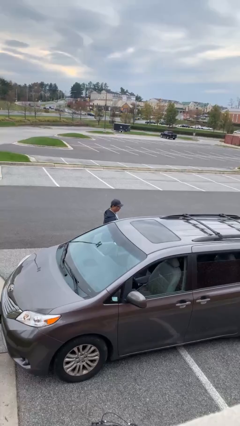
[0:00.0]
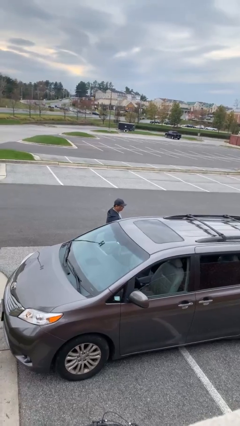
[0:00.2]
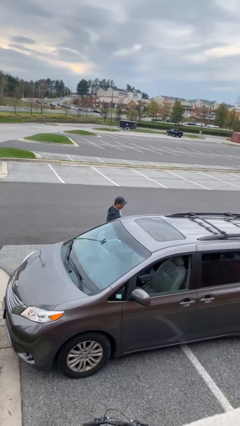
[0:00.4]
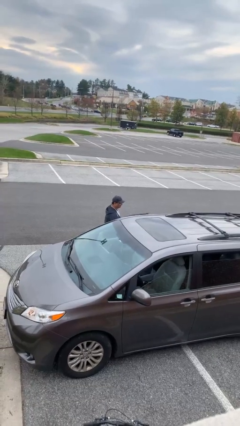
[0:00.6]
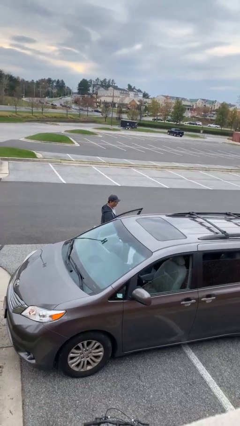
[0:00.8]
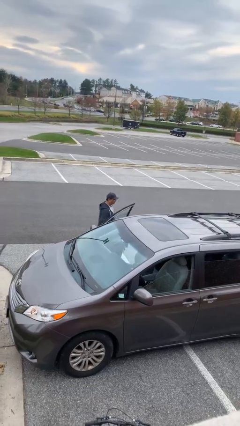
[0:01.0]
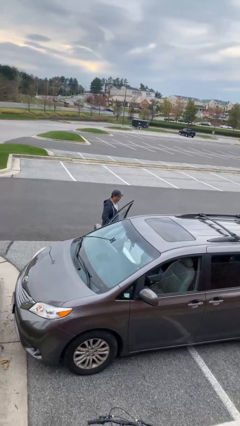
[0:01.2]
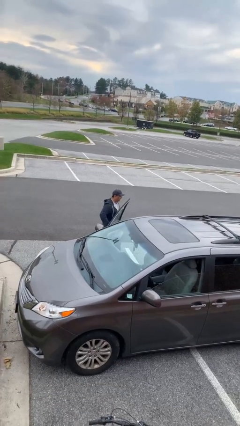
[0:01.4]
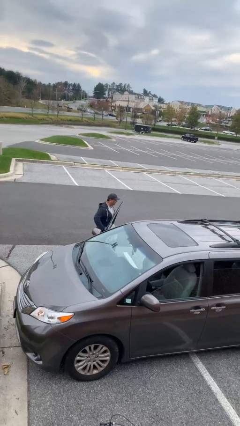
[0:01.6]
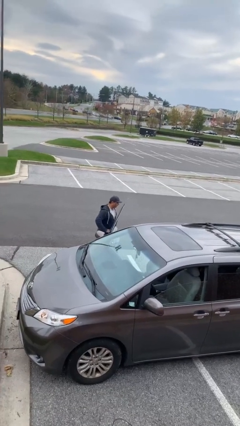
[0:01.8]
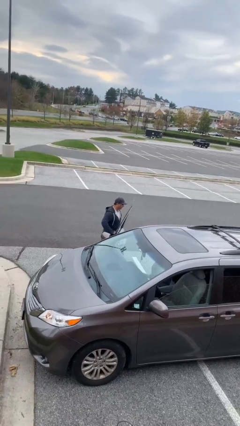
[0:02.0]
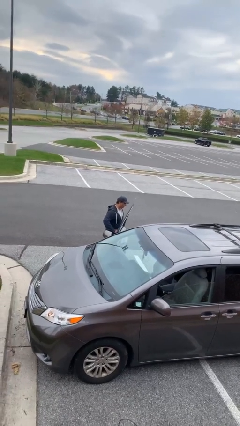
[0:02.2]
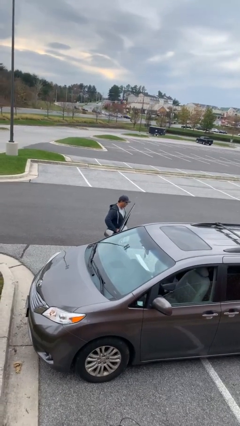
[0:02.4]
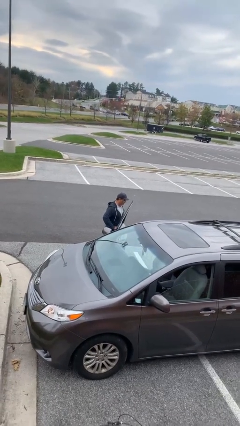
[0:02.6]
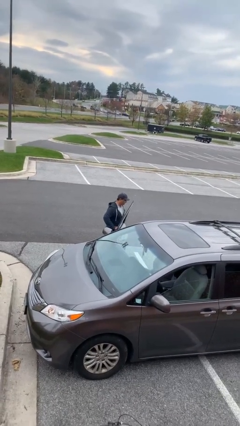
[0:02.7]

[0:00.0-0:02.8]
person opens car door

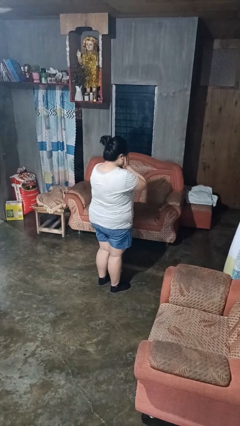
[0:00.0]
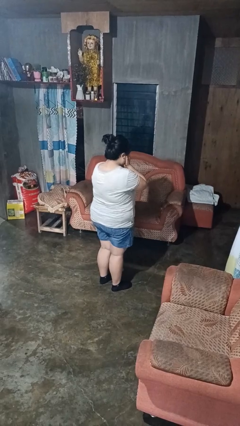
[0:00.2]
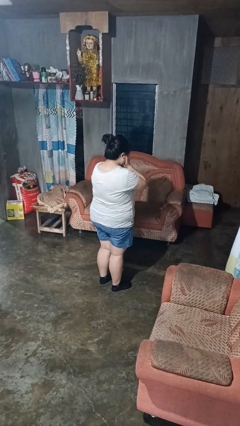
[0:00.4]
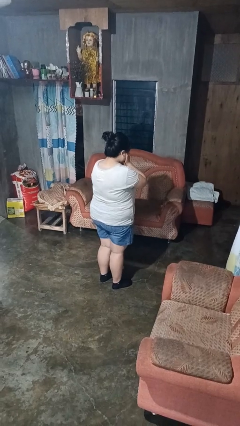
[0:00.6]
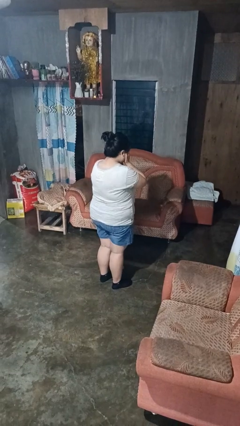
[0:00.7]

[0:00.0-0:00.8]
person covers face with hands

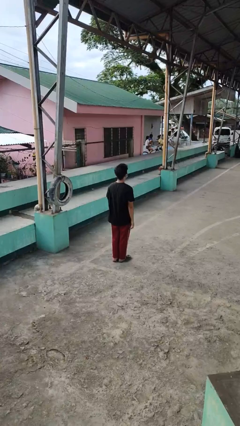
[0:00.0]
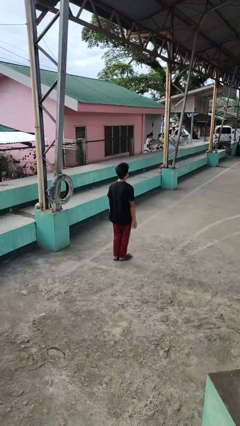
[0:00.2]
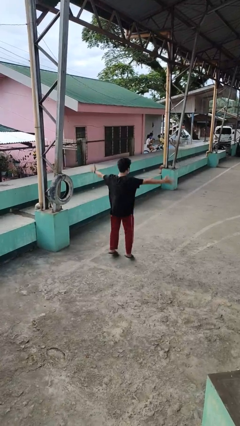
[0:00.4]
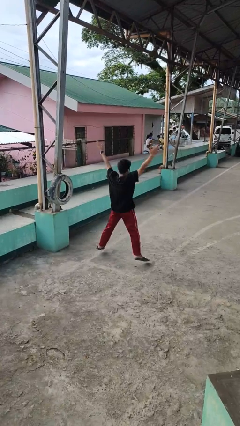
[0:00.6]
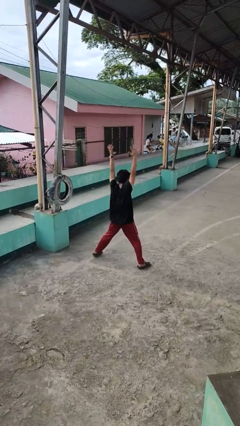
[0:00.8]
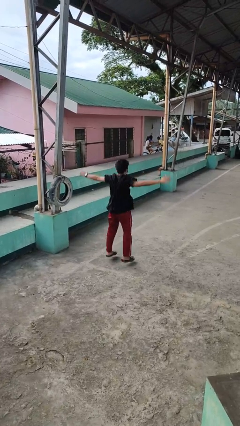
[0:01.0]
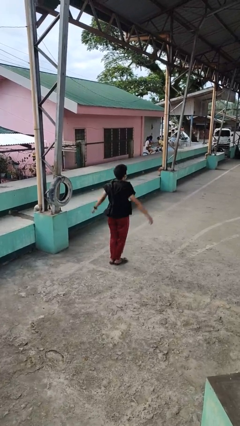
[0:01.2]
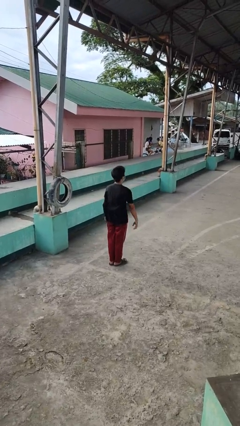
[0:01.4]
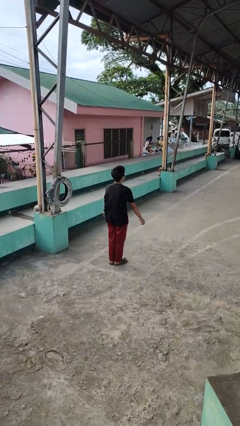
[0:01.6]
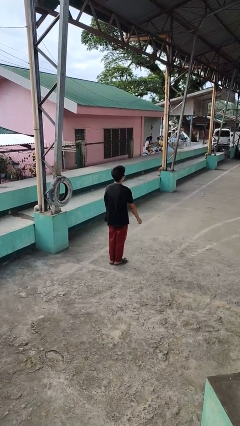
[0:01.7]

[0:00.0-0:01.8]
person exercises with jumping jacks

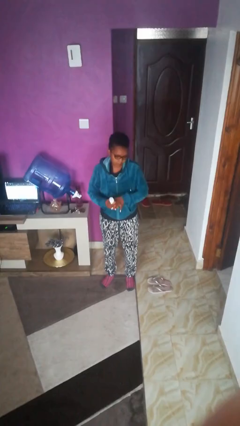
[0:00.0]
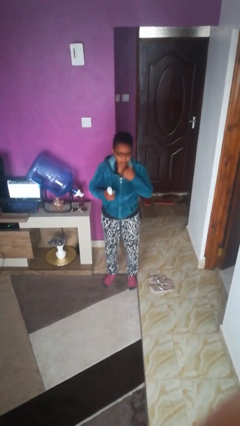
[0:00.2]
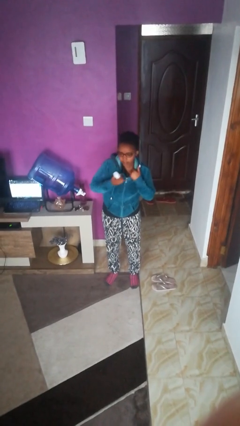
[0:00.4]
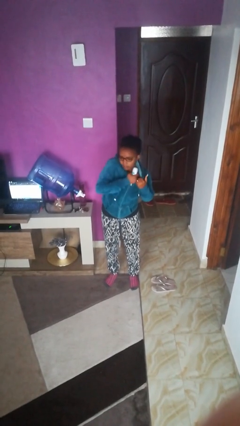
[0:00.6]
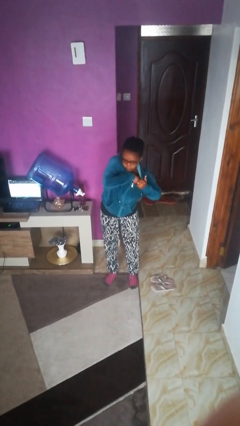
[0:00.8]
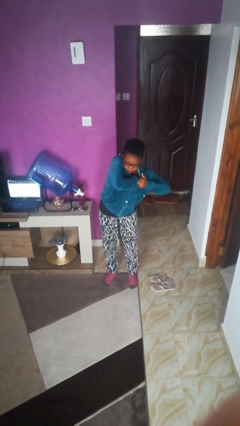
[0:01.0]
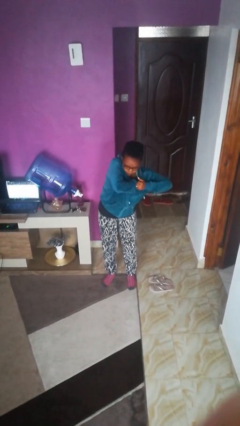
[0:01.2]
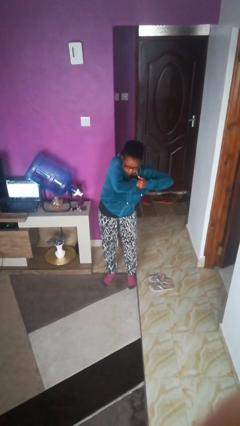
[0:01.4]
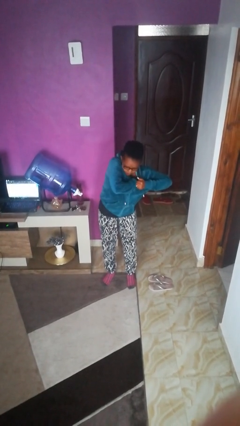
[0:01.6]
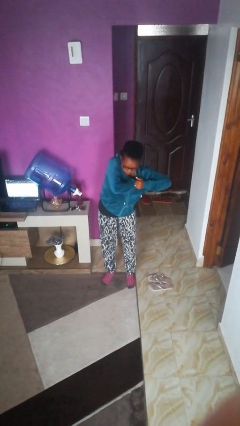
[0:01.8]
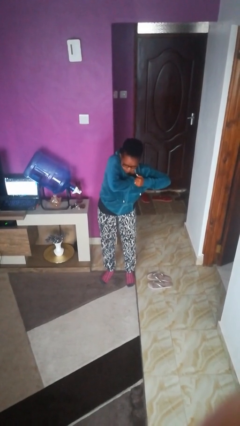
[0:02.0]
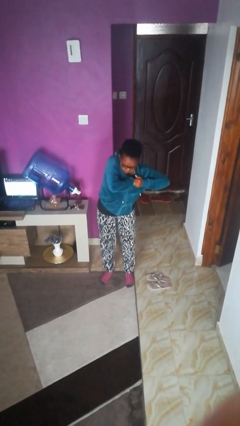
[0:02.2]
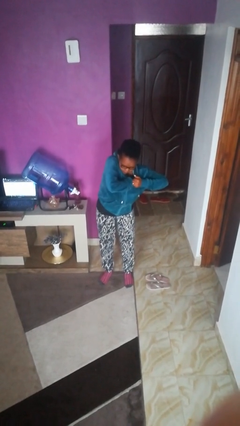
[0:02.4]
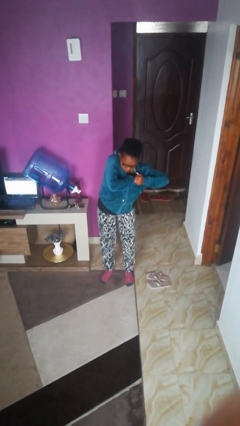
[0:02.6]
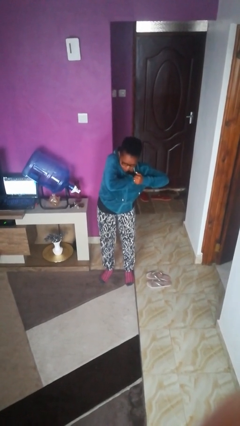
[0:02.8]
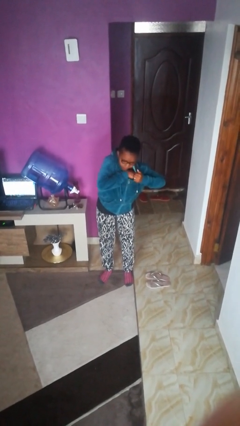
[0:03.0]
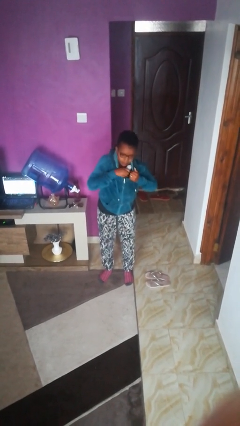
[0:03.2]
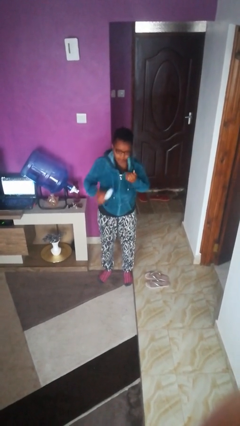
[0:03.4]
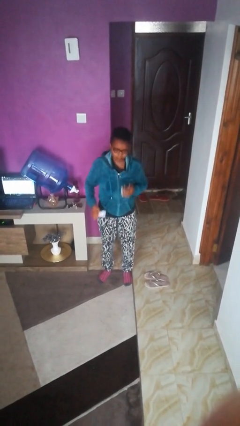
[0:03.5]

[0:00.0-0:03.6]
person applies deodorant

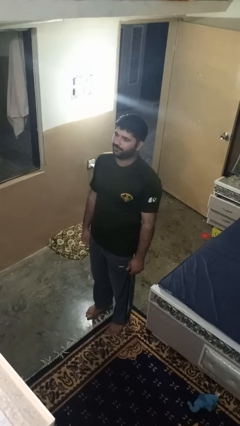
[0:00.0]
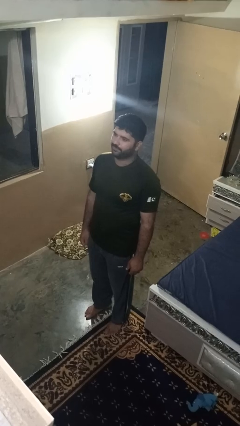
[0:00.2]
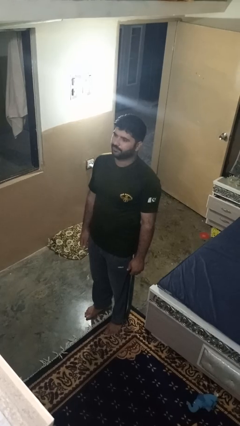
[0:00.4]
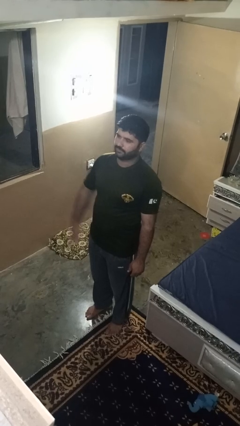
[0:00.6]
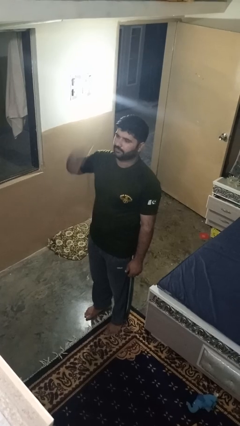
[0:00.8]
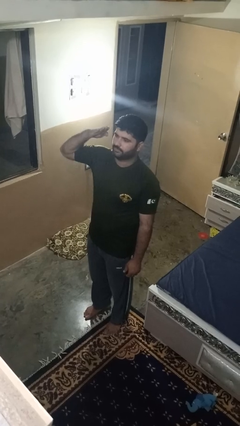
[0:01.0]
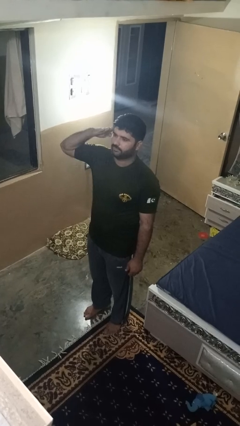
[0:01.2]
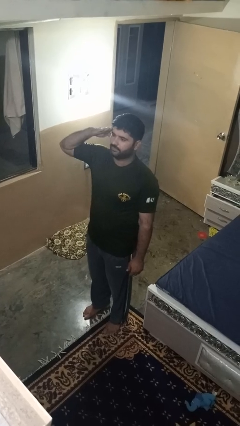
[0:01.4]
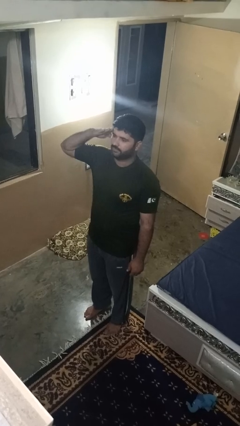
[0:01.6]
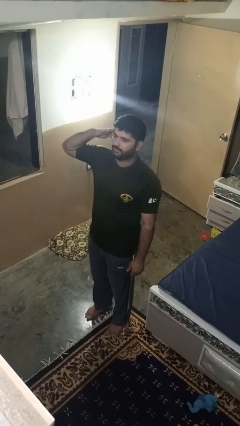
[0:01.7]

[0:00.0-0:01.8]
person salutes

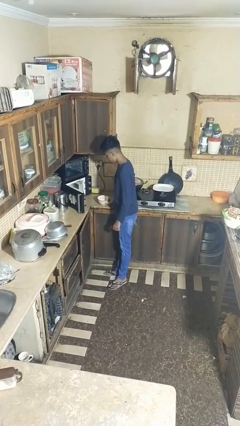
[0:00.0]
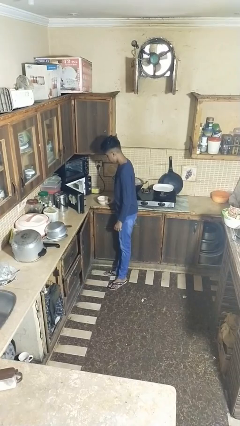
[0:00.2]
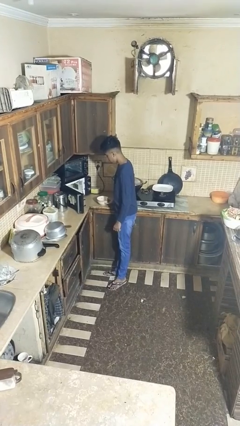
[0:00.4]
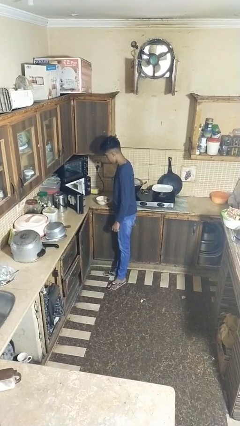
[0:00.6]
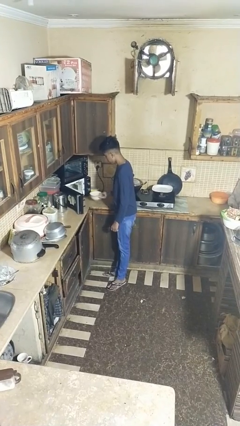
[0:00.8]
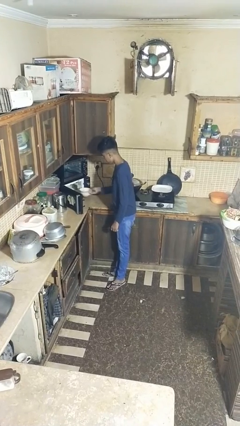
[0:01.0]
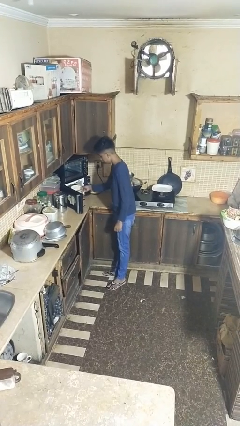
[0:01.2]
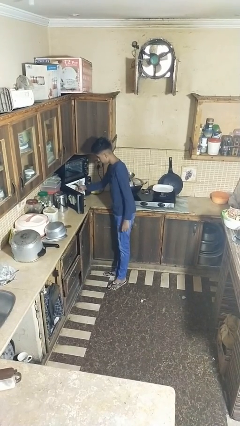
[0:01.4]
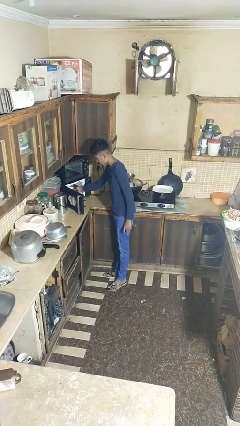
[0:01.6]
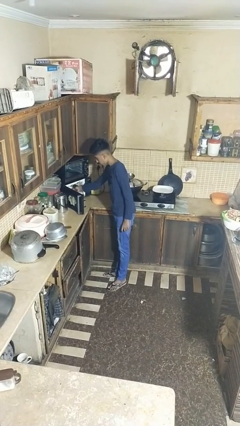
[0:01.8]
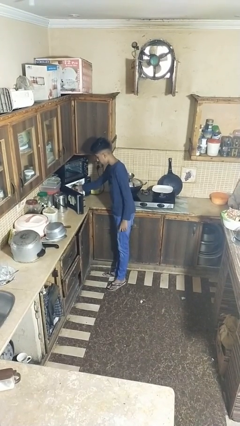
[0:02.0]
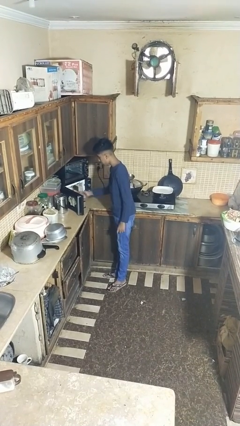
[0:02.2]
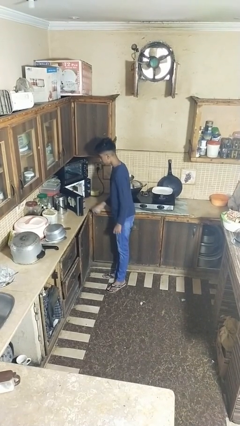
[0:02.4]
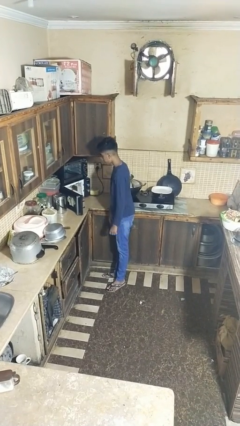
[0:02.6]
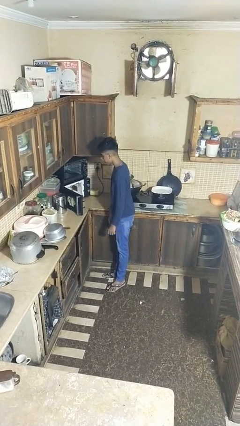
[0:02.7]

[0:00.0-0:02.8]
person puts object into microwave

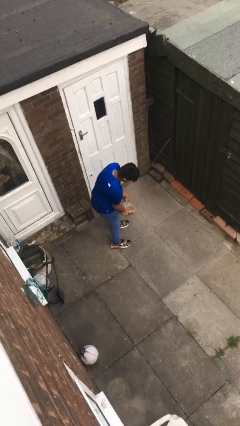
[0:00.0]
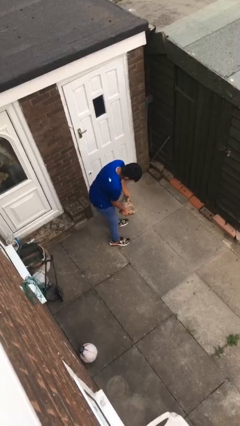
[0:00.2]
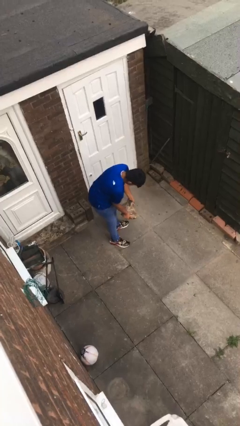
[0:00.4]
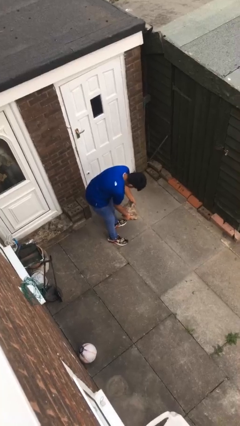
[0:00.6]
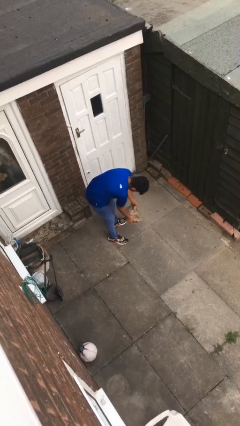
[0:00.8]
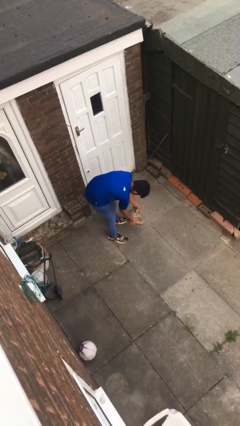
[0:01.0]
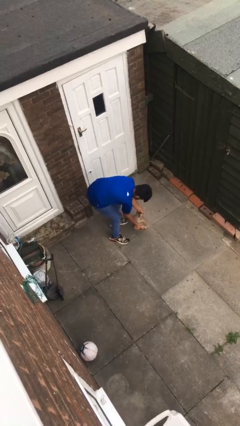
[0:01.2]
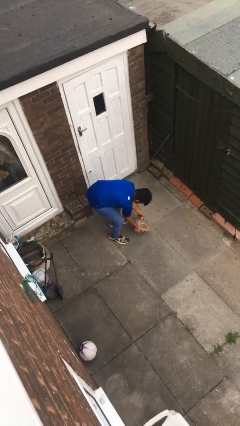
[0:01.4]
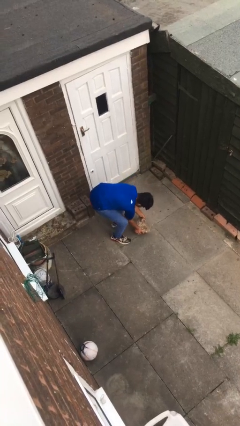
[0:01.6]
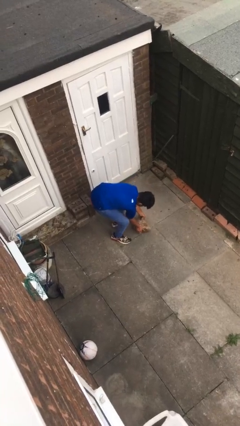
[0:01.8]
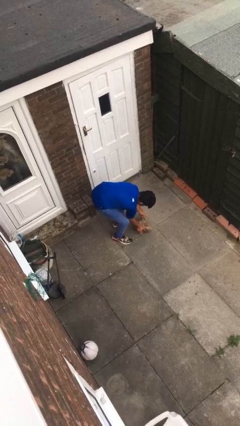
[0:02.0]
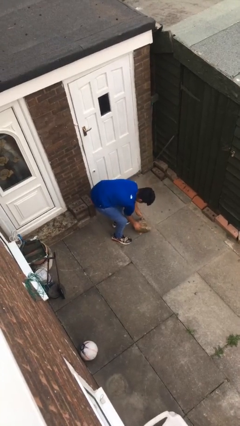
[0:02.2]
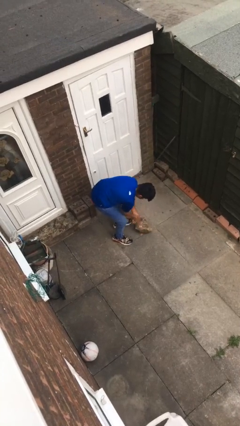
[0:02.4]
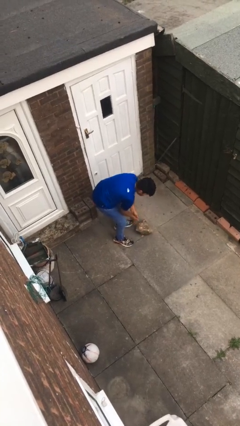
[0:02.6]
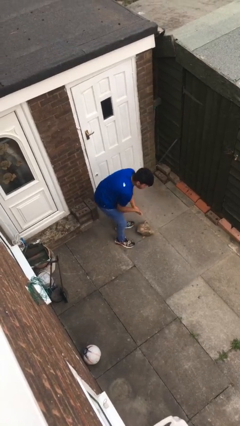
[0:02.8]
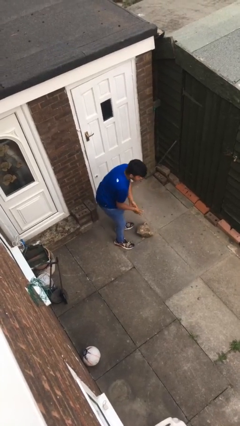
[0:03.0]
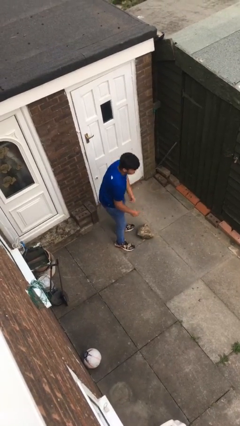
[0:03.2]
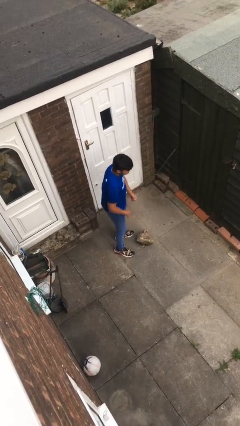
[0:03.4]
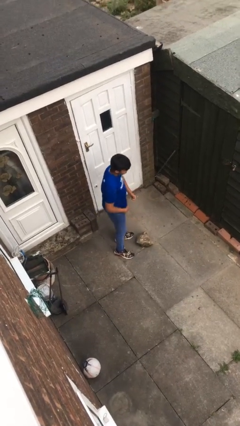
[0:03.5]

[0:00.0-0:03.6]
person puts down object on floor
